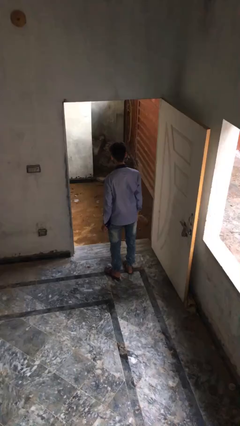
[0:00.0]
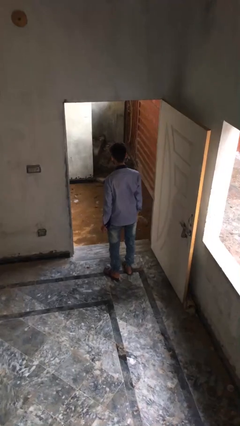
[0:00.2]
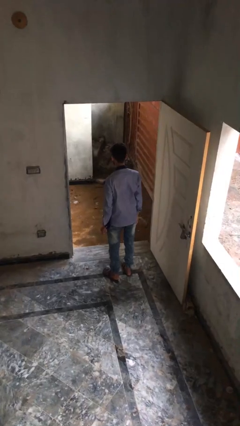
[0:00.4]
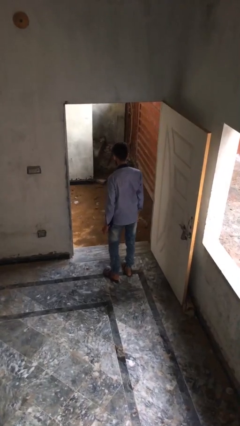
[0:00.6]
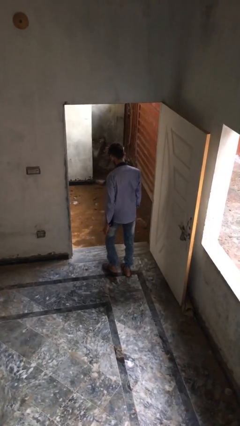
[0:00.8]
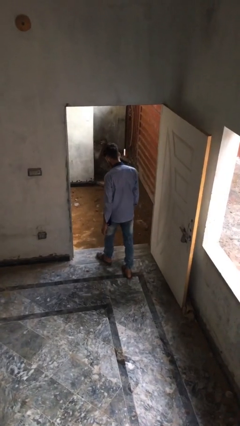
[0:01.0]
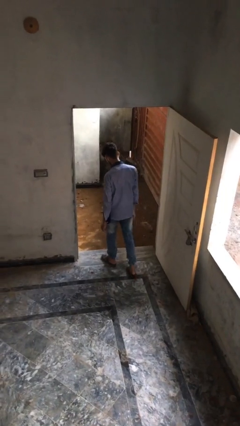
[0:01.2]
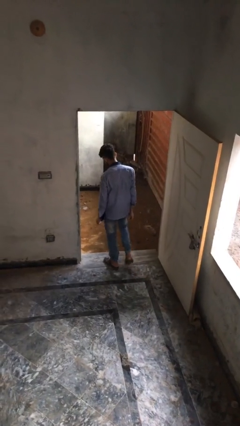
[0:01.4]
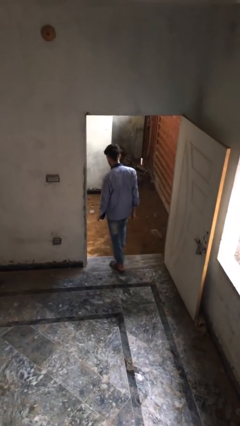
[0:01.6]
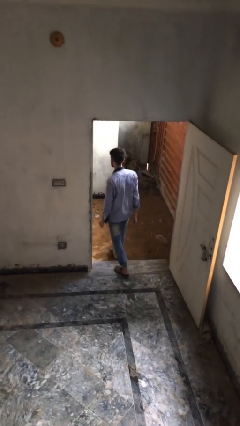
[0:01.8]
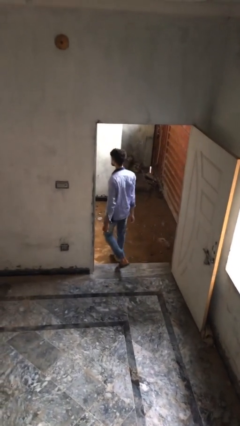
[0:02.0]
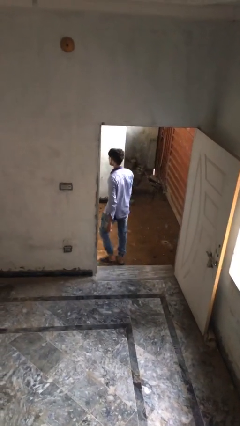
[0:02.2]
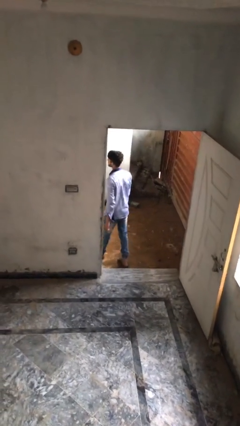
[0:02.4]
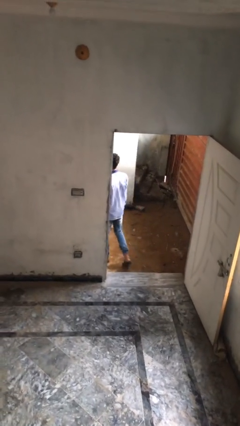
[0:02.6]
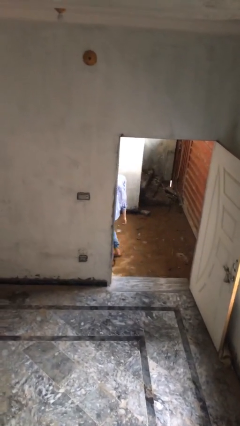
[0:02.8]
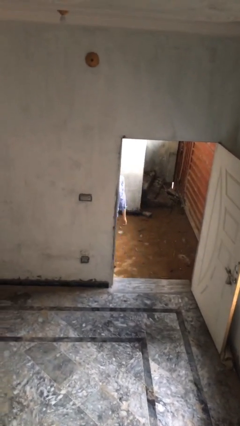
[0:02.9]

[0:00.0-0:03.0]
person exits scene through structure

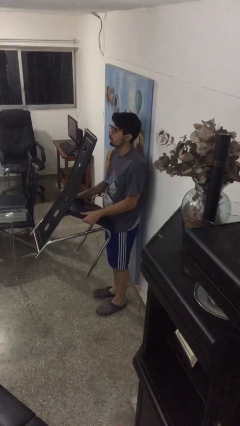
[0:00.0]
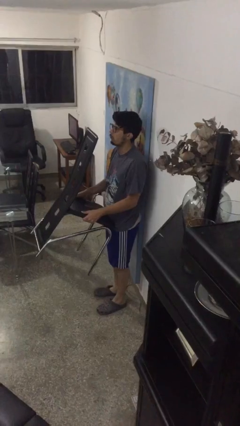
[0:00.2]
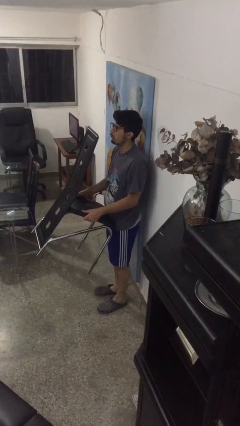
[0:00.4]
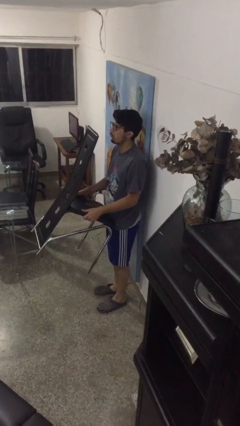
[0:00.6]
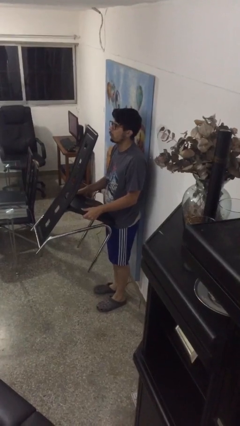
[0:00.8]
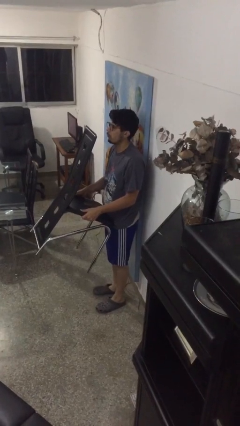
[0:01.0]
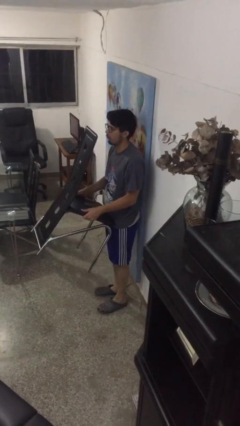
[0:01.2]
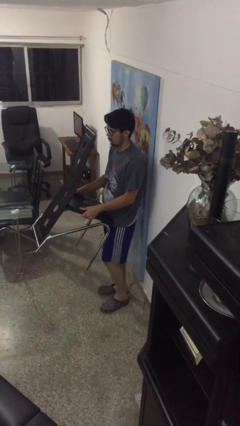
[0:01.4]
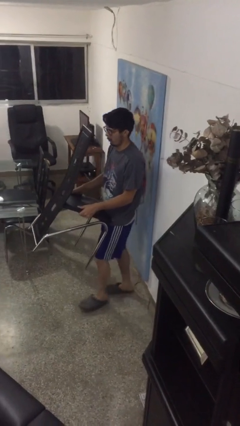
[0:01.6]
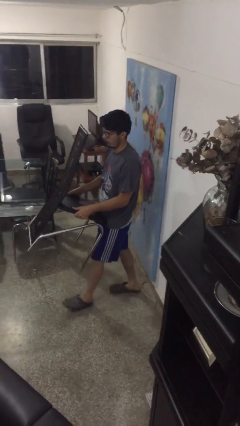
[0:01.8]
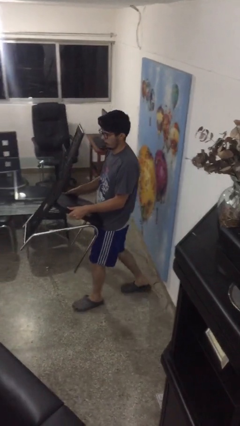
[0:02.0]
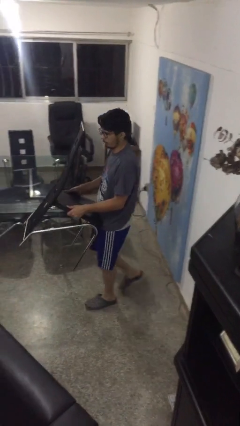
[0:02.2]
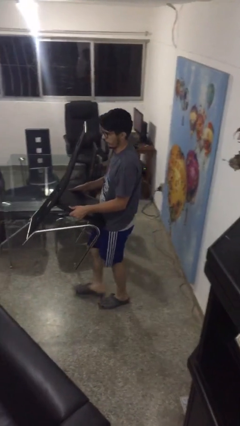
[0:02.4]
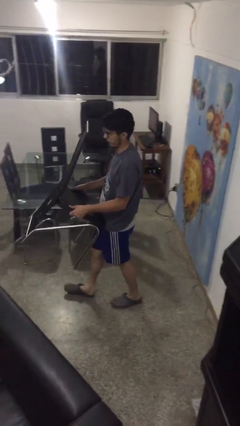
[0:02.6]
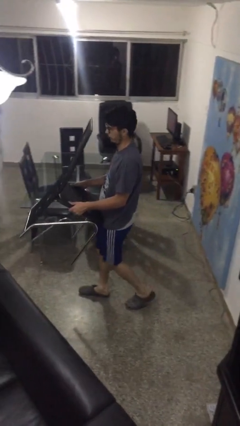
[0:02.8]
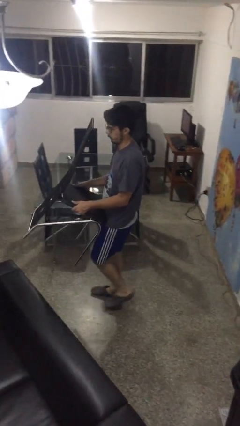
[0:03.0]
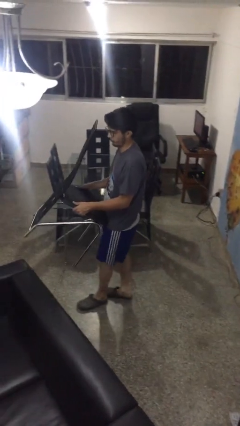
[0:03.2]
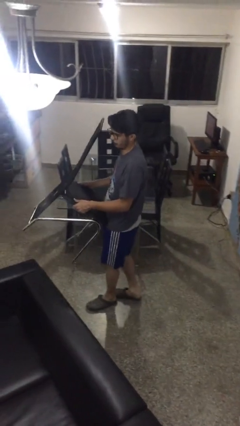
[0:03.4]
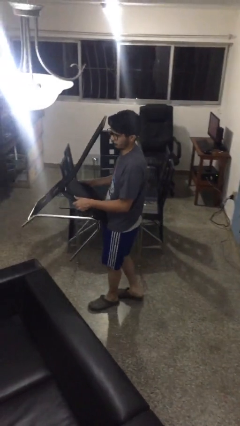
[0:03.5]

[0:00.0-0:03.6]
person carries furniture

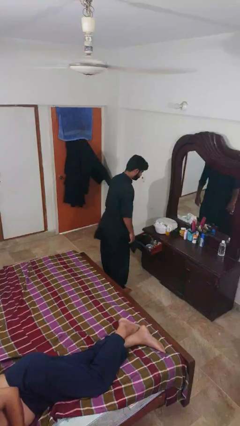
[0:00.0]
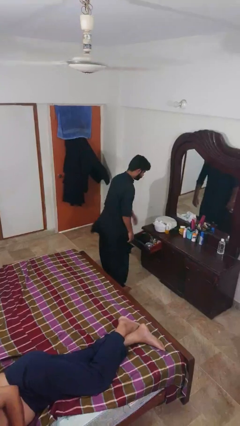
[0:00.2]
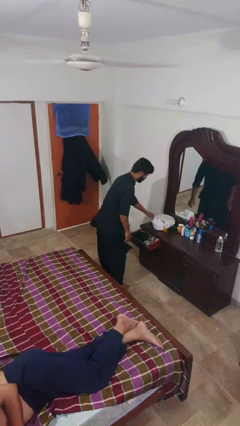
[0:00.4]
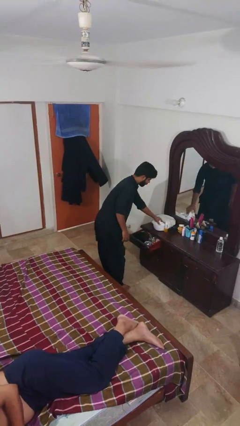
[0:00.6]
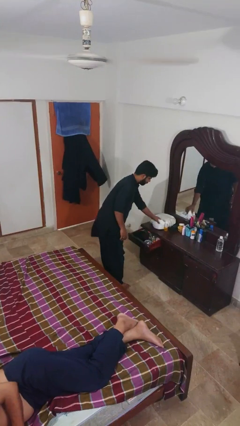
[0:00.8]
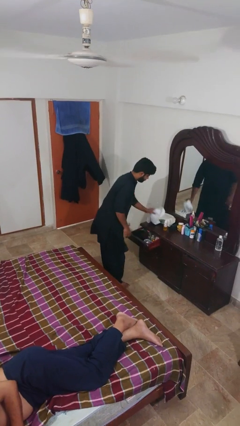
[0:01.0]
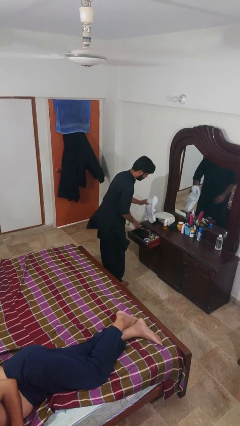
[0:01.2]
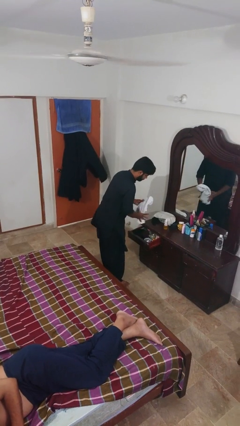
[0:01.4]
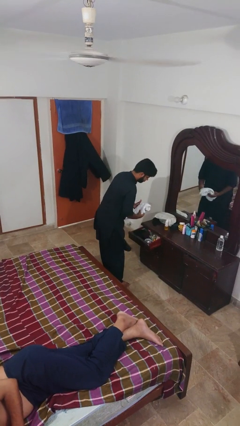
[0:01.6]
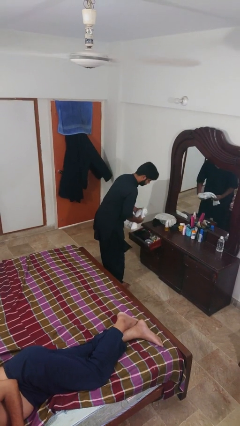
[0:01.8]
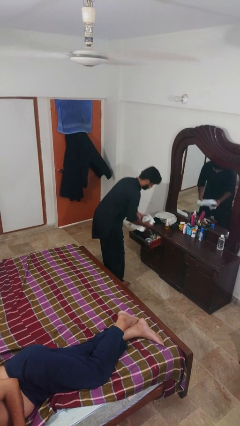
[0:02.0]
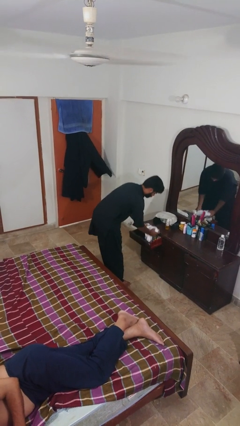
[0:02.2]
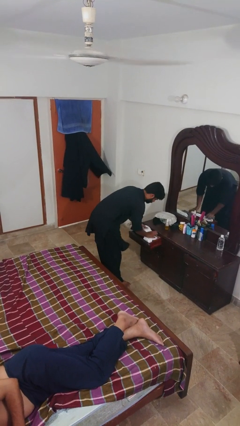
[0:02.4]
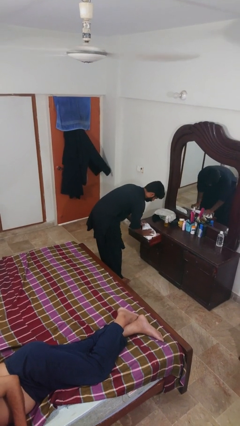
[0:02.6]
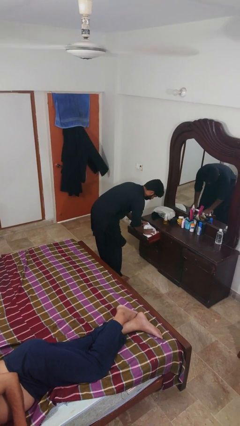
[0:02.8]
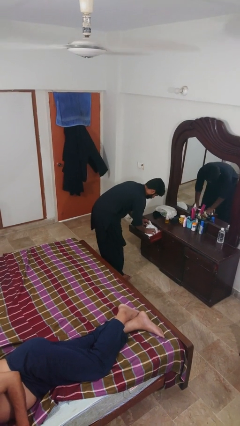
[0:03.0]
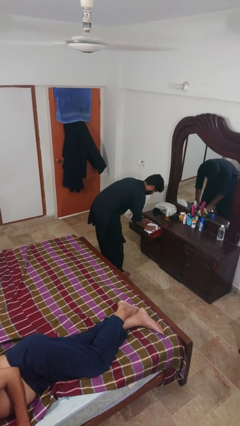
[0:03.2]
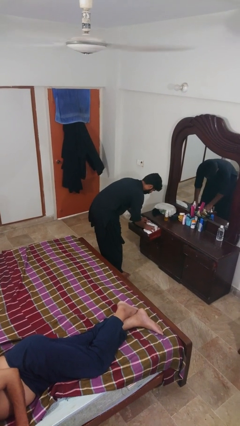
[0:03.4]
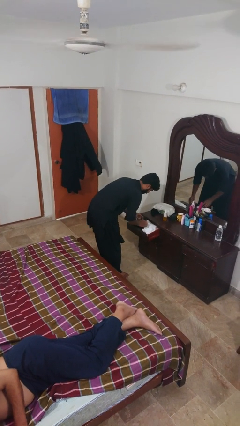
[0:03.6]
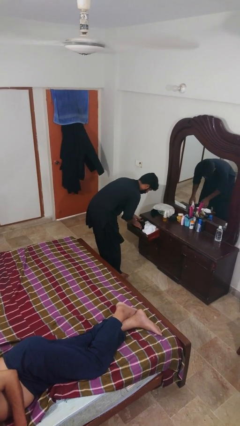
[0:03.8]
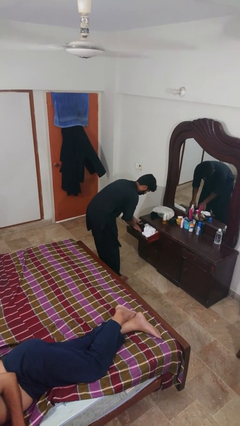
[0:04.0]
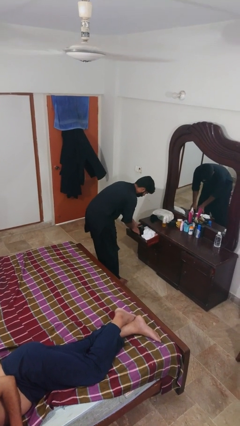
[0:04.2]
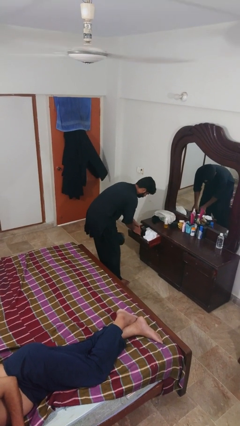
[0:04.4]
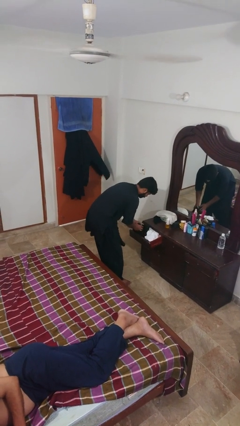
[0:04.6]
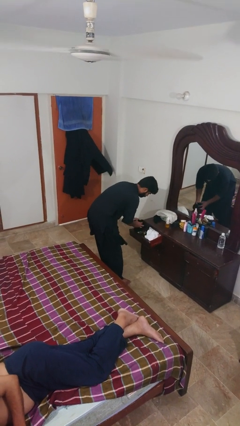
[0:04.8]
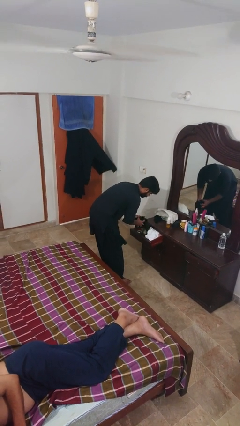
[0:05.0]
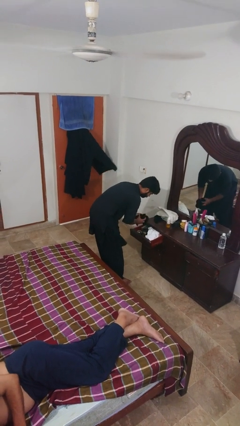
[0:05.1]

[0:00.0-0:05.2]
person puts clothes into dresser

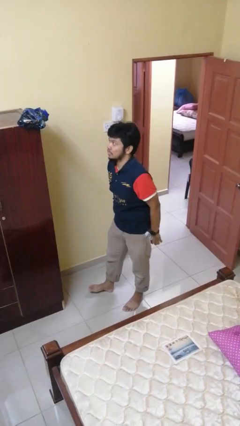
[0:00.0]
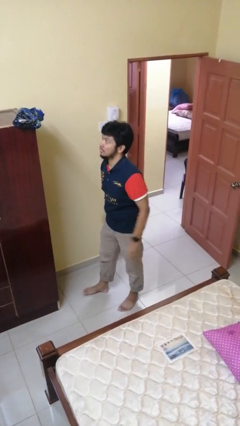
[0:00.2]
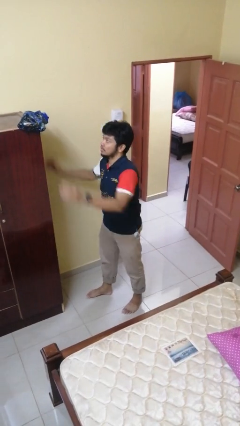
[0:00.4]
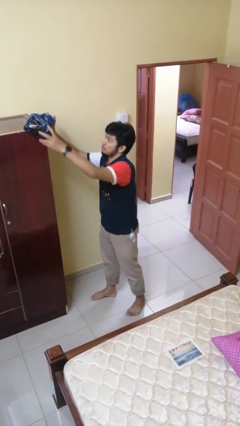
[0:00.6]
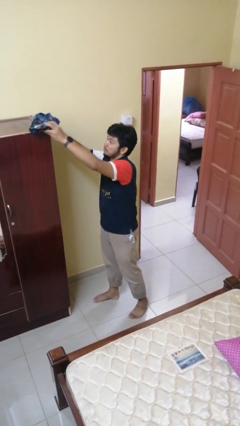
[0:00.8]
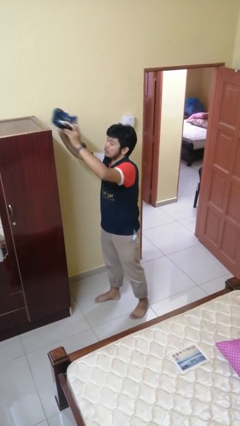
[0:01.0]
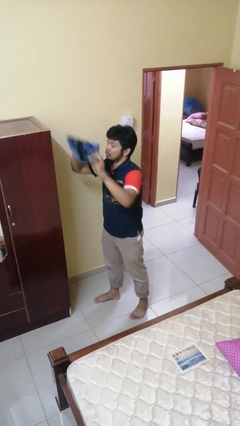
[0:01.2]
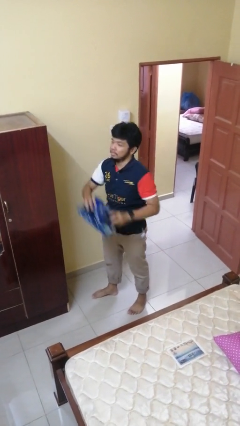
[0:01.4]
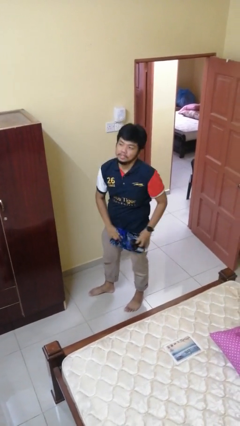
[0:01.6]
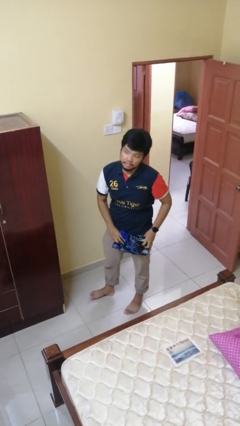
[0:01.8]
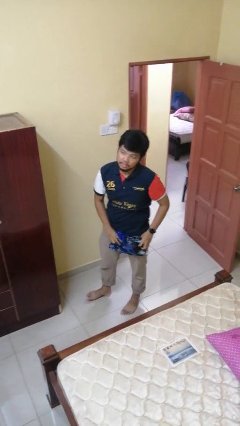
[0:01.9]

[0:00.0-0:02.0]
person picks up object from countertop

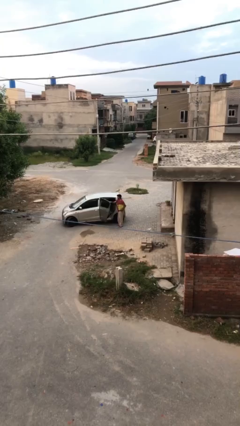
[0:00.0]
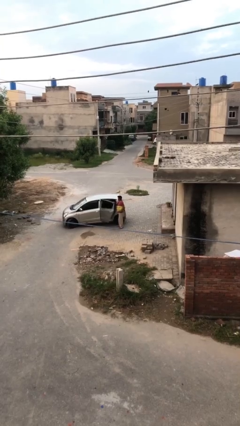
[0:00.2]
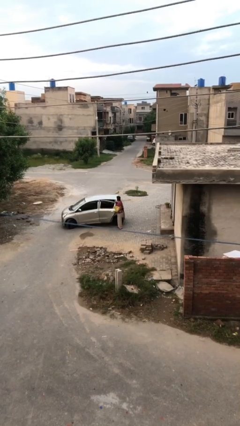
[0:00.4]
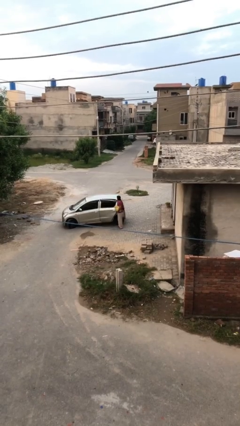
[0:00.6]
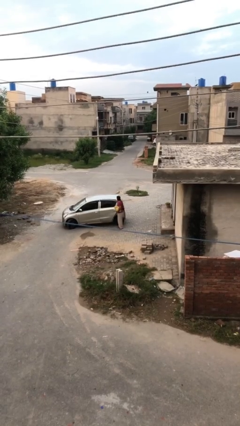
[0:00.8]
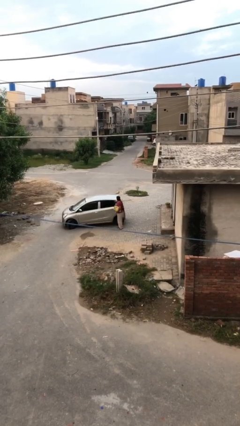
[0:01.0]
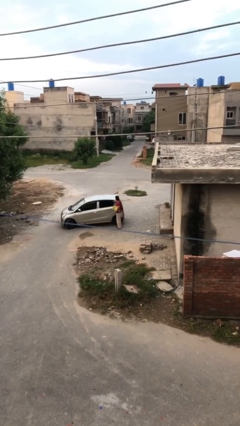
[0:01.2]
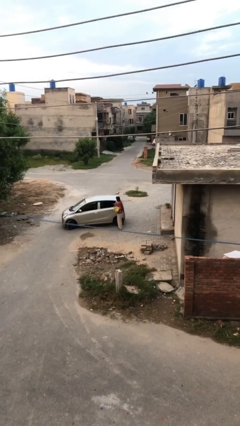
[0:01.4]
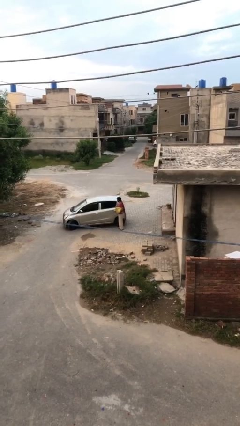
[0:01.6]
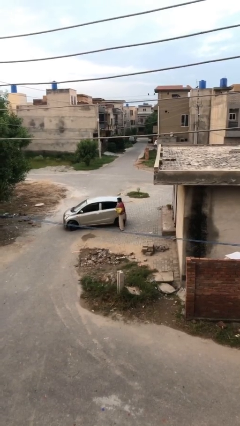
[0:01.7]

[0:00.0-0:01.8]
person closes car door

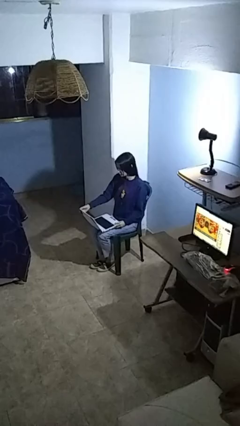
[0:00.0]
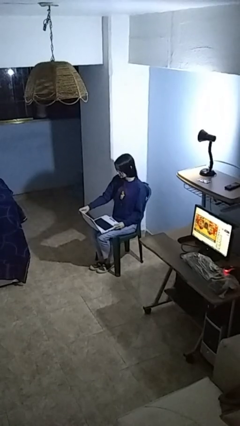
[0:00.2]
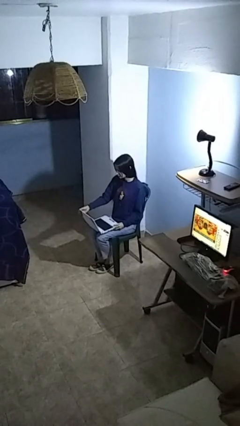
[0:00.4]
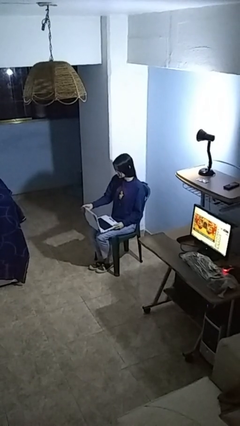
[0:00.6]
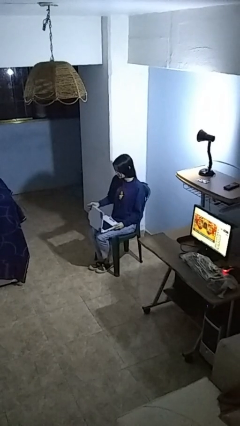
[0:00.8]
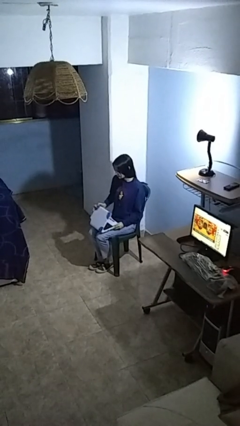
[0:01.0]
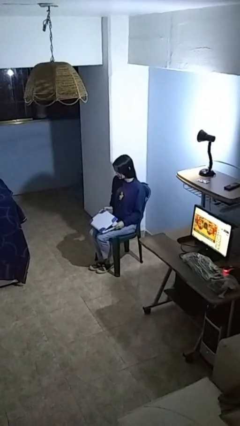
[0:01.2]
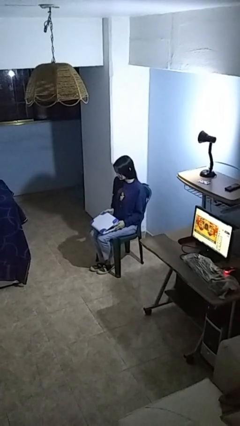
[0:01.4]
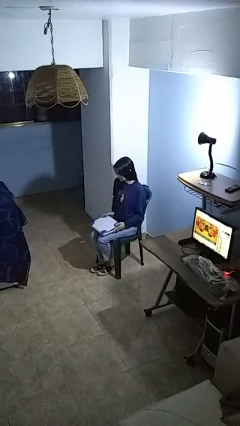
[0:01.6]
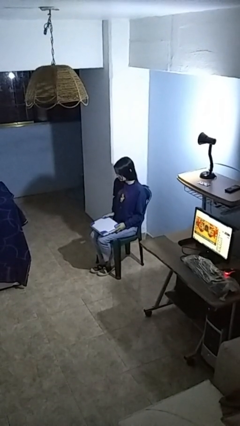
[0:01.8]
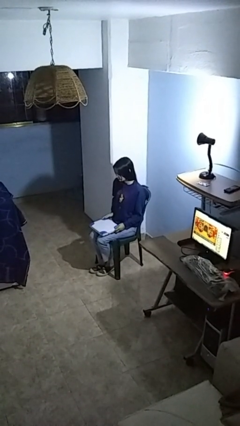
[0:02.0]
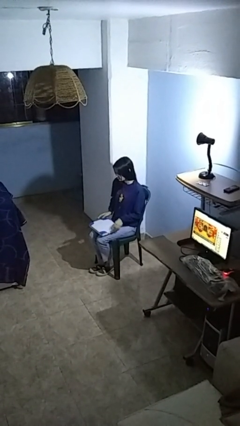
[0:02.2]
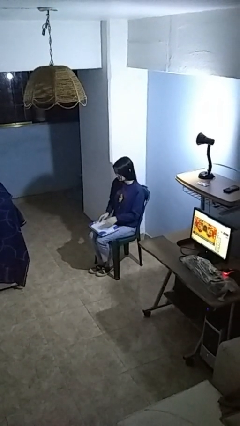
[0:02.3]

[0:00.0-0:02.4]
person closes laptop
